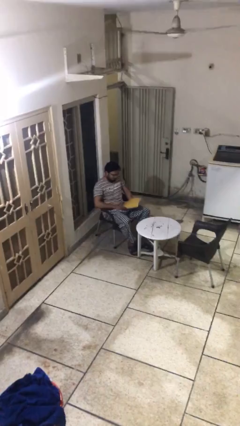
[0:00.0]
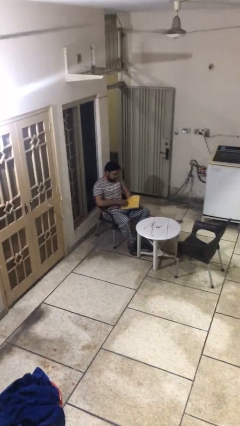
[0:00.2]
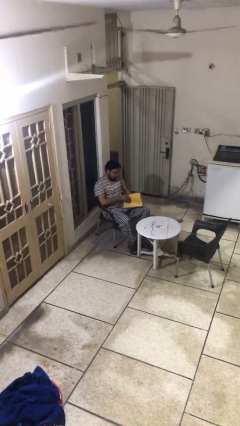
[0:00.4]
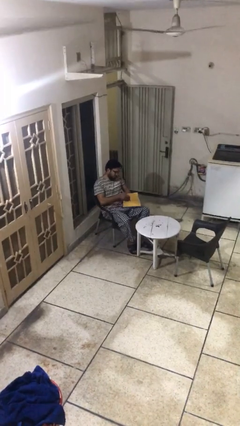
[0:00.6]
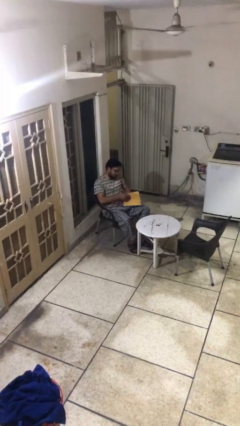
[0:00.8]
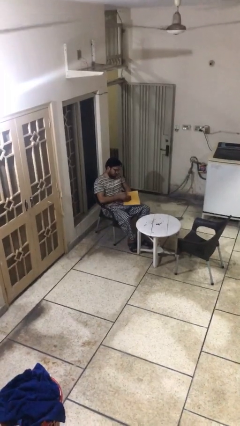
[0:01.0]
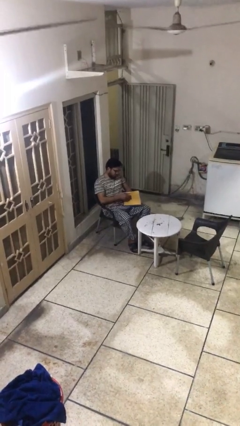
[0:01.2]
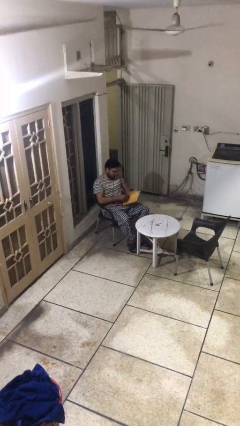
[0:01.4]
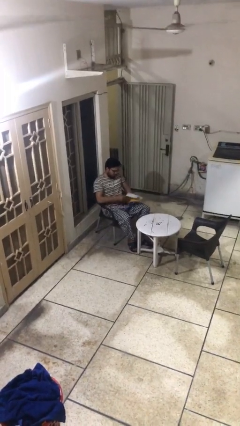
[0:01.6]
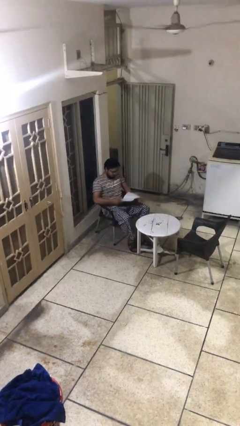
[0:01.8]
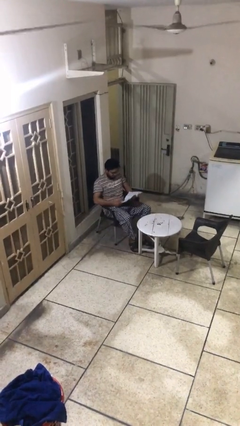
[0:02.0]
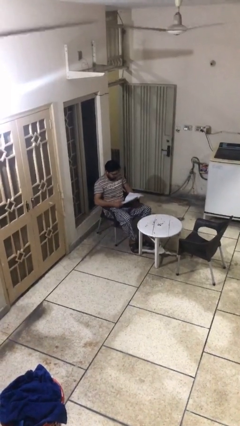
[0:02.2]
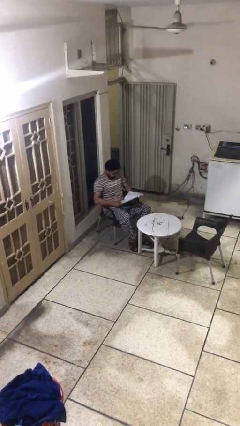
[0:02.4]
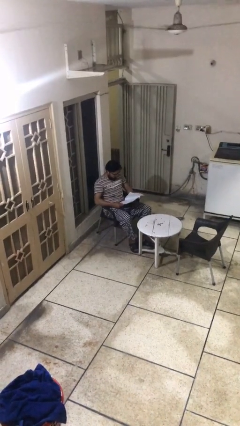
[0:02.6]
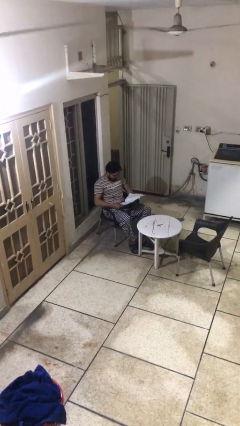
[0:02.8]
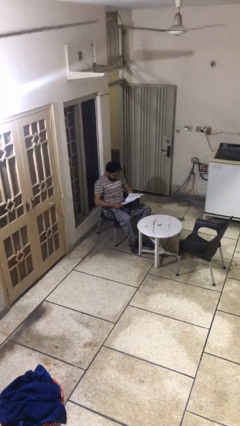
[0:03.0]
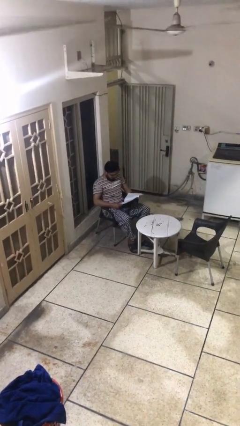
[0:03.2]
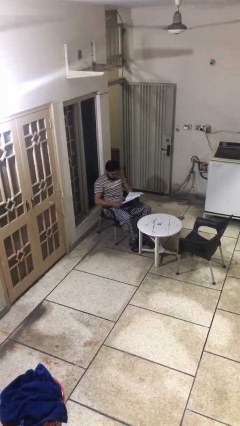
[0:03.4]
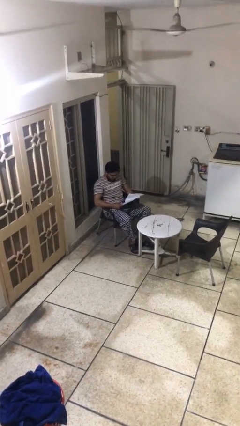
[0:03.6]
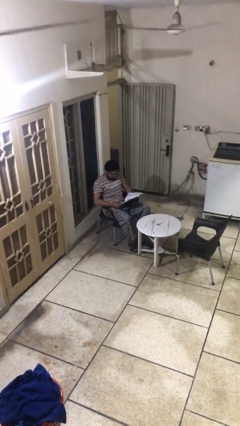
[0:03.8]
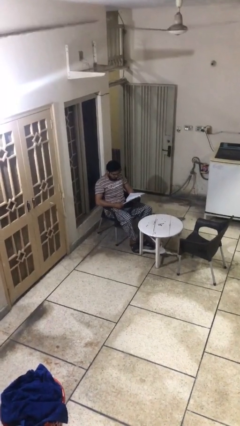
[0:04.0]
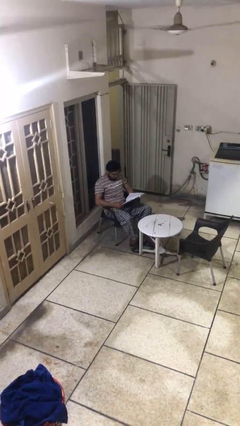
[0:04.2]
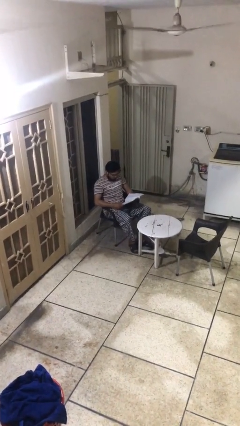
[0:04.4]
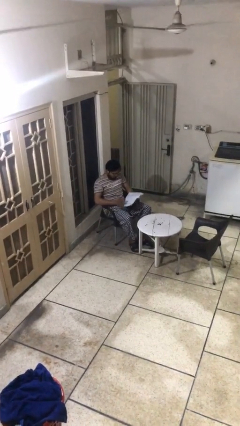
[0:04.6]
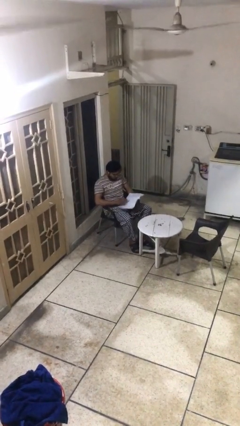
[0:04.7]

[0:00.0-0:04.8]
person reads document

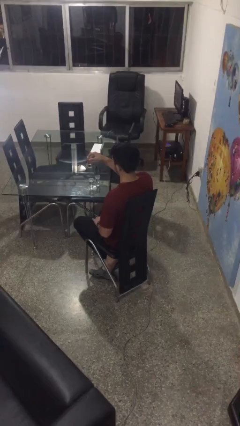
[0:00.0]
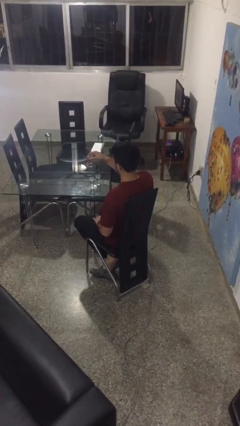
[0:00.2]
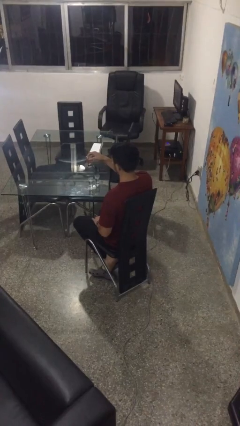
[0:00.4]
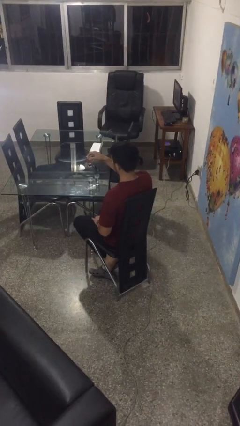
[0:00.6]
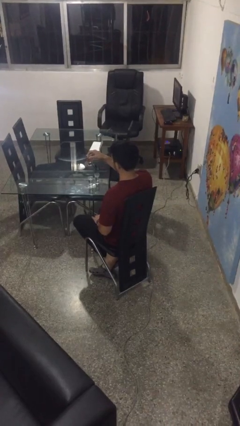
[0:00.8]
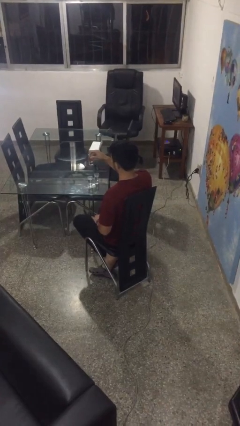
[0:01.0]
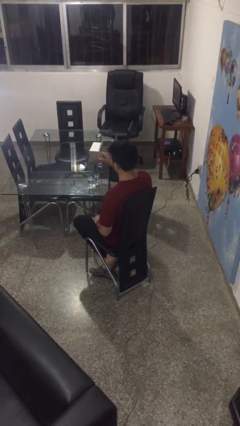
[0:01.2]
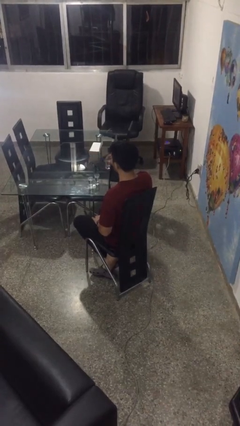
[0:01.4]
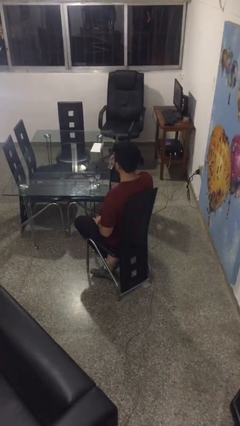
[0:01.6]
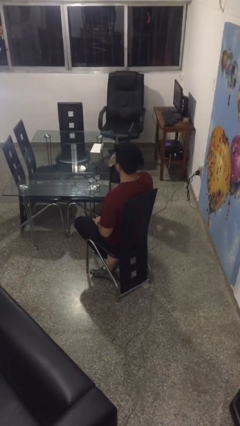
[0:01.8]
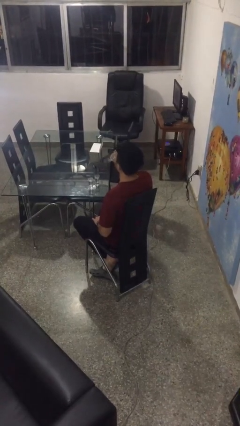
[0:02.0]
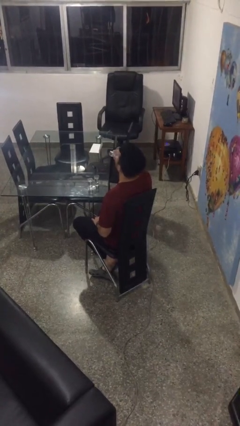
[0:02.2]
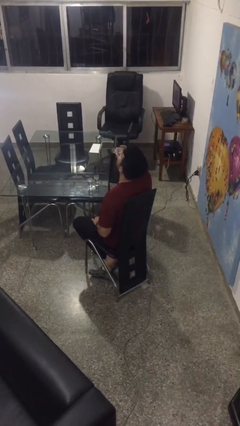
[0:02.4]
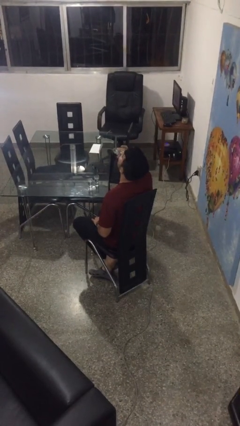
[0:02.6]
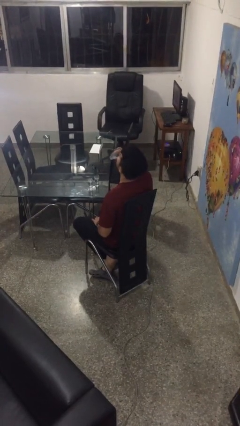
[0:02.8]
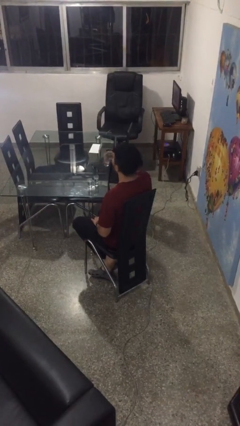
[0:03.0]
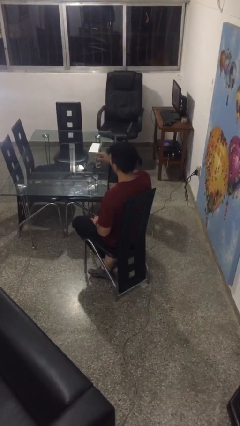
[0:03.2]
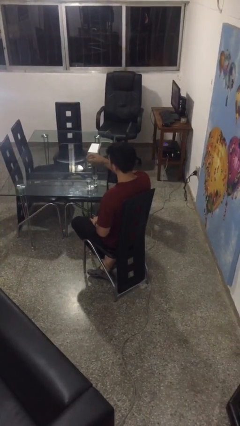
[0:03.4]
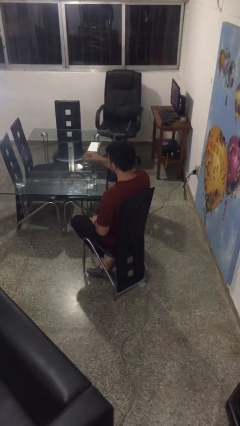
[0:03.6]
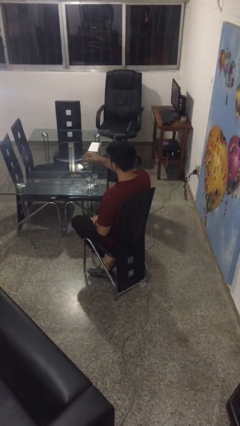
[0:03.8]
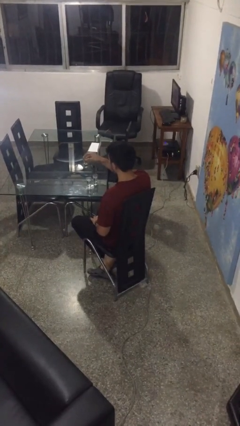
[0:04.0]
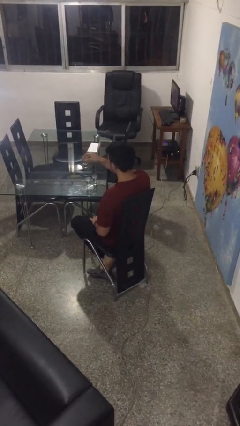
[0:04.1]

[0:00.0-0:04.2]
person drinks from shotglass

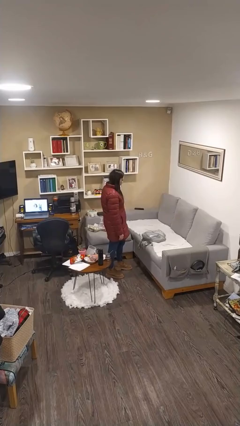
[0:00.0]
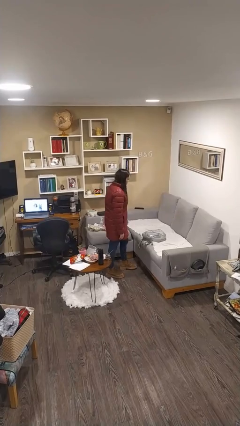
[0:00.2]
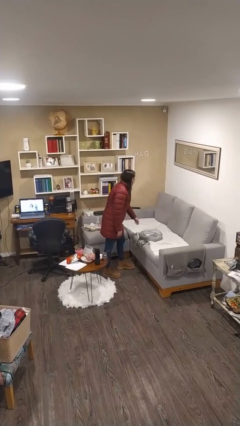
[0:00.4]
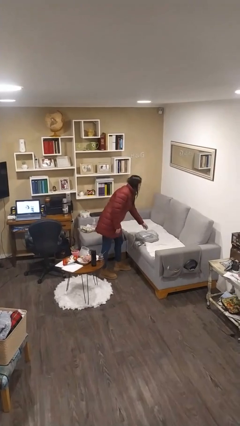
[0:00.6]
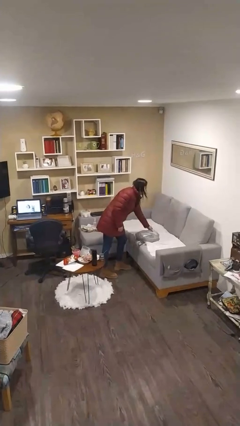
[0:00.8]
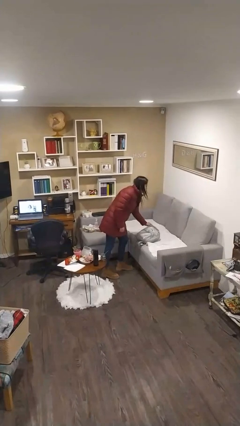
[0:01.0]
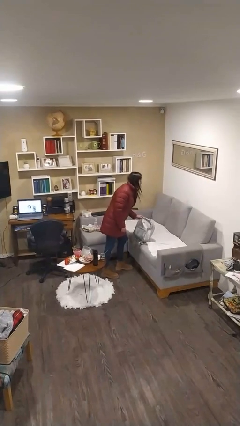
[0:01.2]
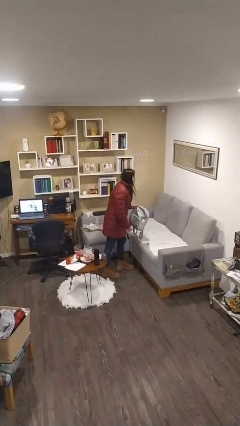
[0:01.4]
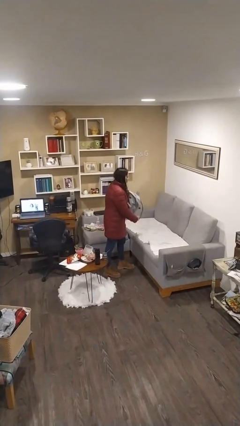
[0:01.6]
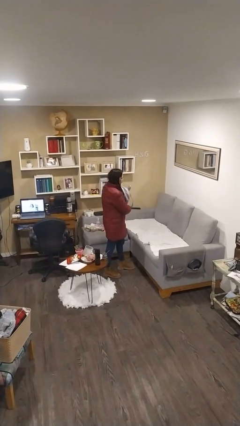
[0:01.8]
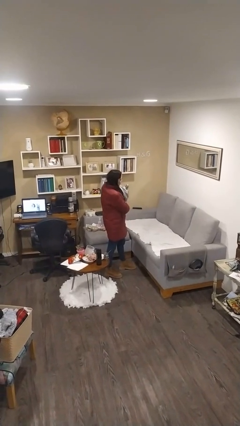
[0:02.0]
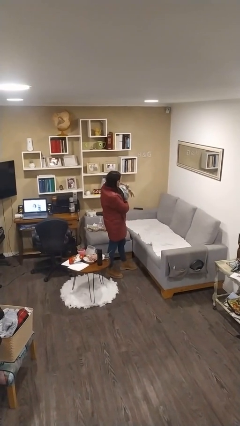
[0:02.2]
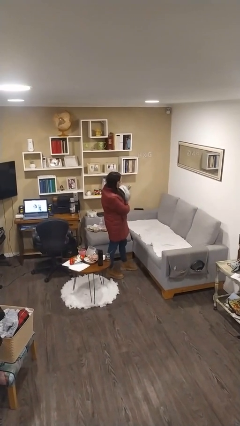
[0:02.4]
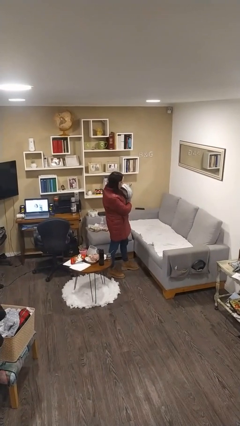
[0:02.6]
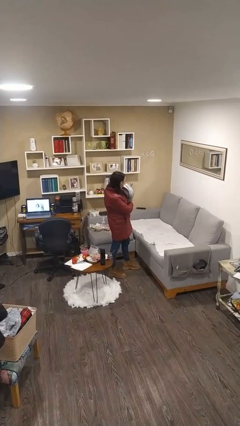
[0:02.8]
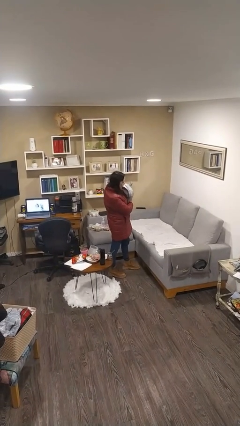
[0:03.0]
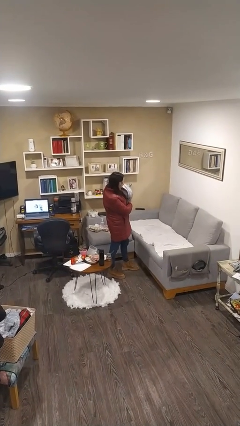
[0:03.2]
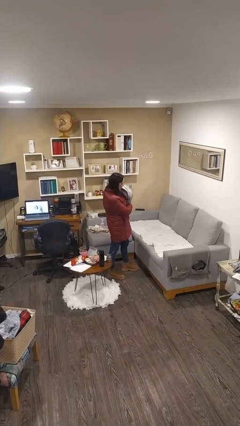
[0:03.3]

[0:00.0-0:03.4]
person picks up object from couch

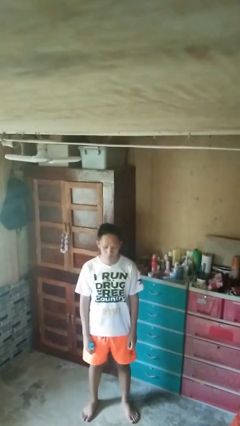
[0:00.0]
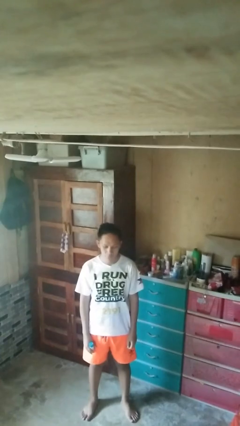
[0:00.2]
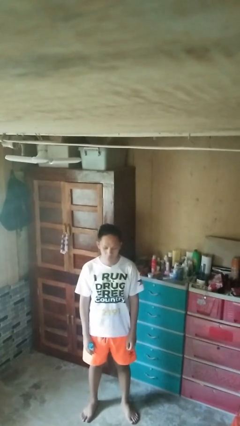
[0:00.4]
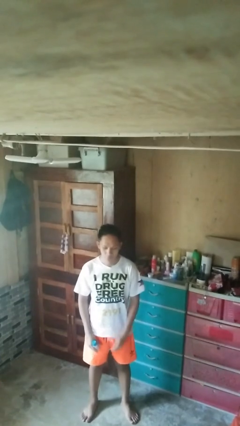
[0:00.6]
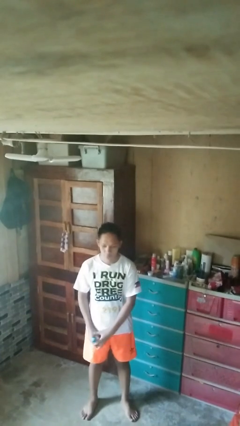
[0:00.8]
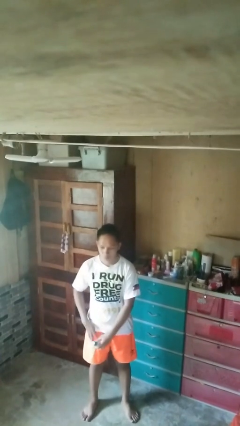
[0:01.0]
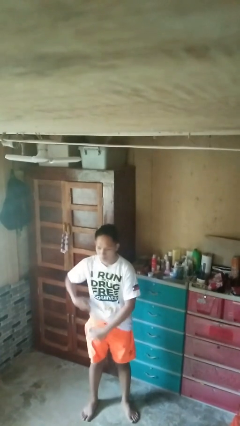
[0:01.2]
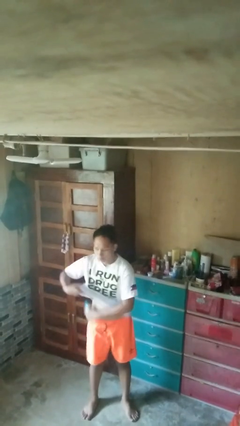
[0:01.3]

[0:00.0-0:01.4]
person applies deodorant

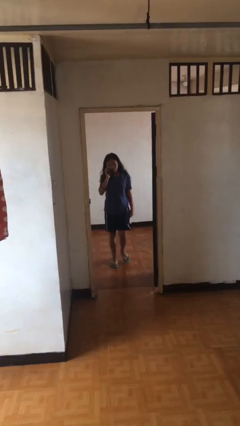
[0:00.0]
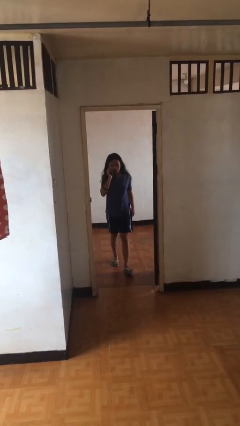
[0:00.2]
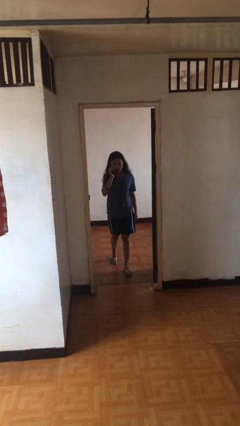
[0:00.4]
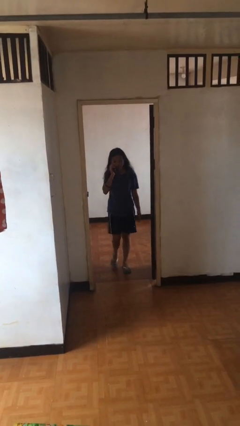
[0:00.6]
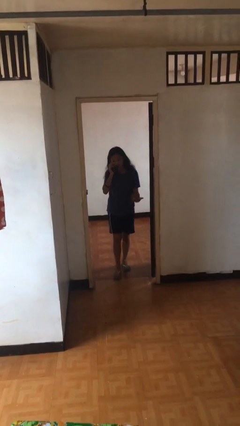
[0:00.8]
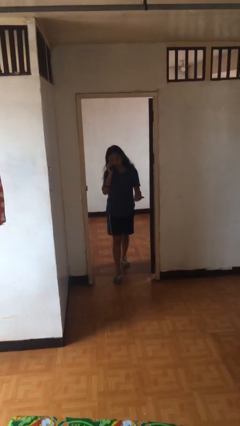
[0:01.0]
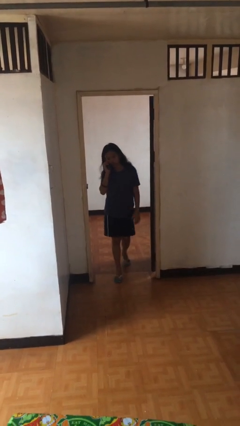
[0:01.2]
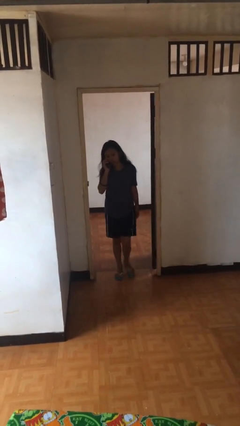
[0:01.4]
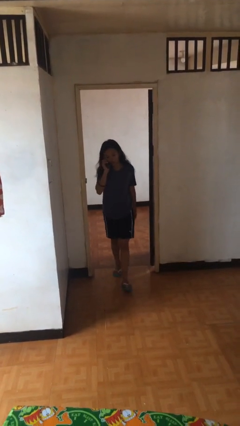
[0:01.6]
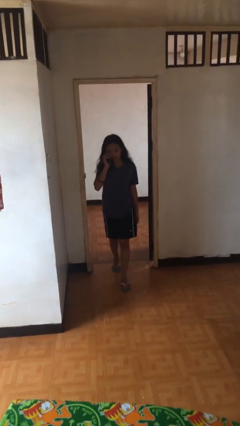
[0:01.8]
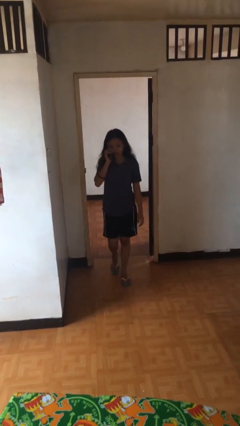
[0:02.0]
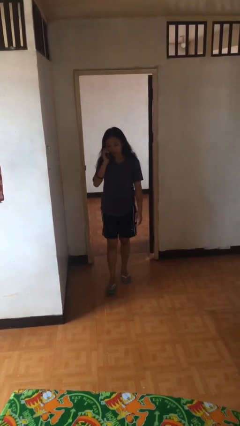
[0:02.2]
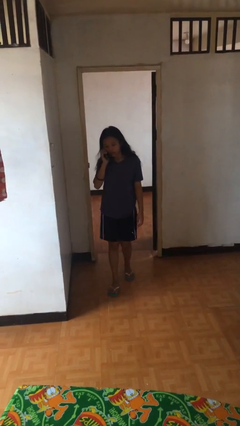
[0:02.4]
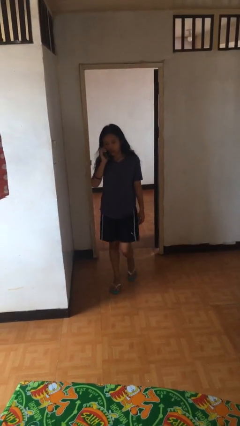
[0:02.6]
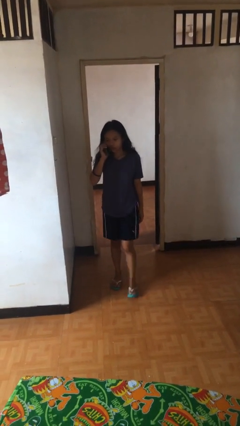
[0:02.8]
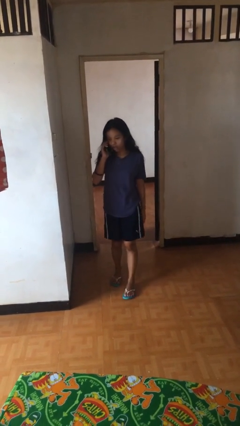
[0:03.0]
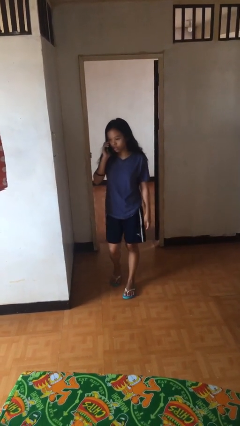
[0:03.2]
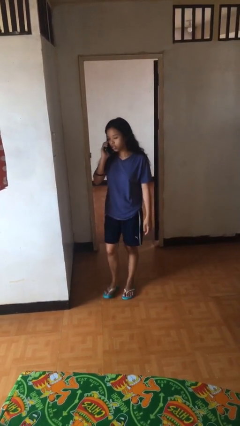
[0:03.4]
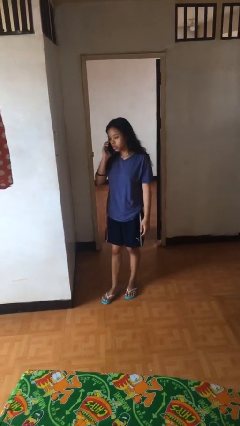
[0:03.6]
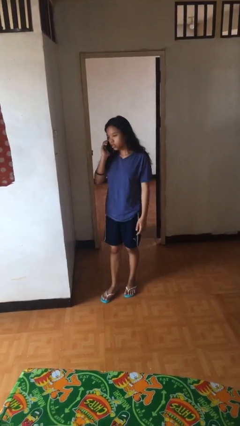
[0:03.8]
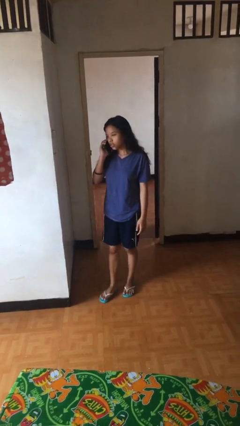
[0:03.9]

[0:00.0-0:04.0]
person enters scene through structure
